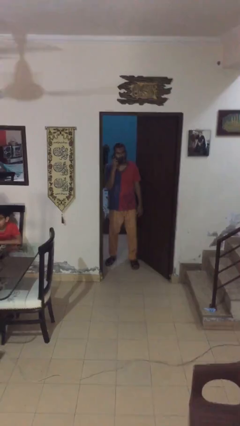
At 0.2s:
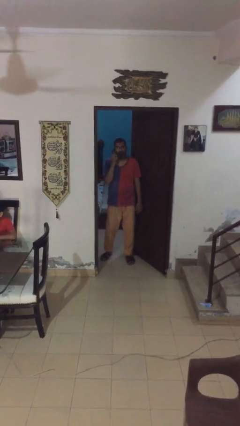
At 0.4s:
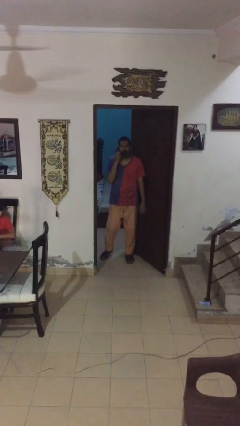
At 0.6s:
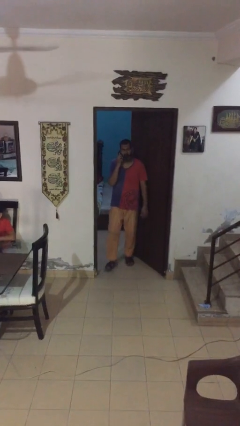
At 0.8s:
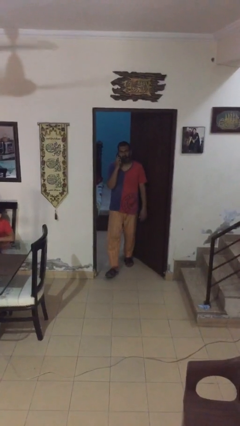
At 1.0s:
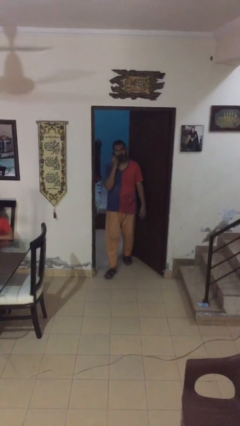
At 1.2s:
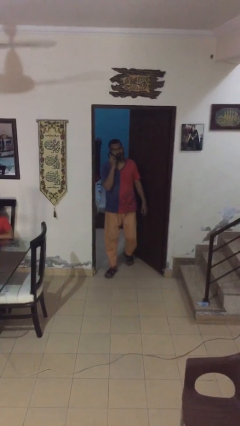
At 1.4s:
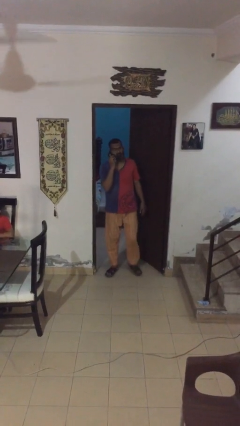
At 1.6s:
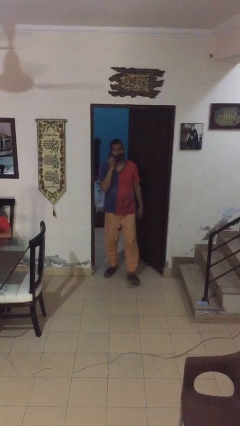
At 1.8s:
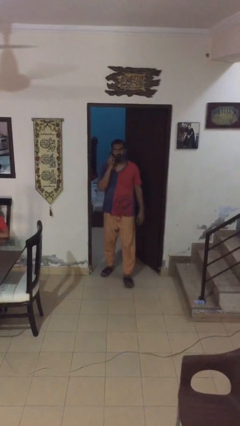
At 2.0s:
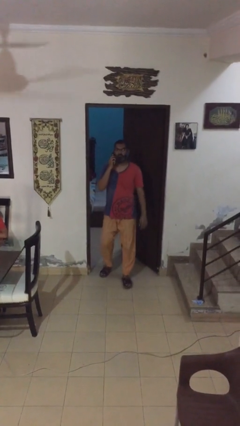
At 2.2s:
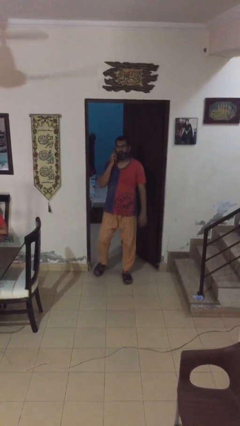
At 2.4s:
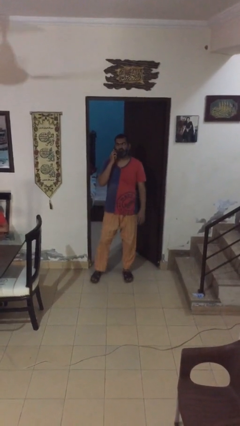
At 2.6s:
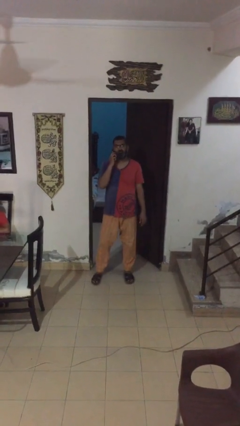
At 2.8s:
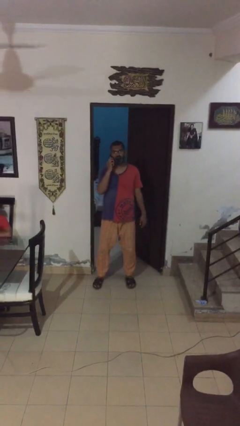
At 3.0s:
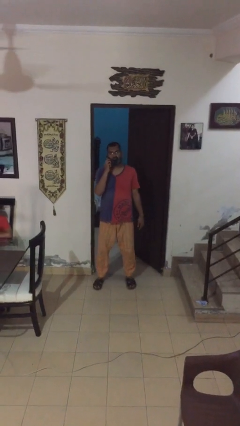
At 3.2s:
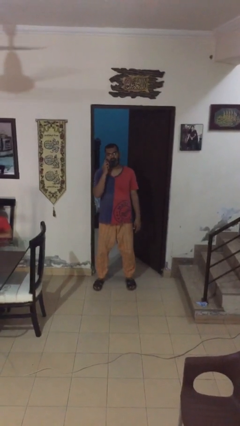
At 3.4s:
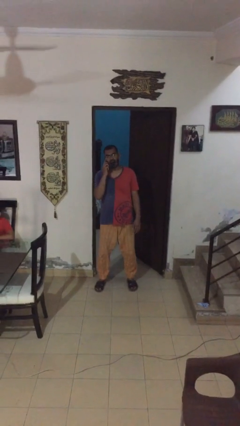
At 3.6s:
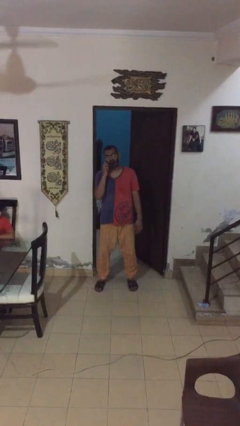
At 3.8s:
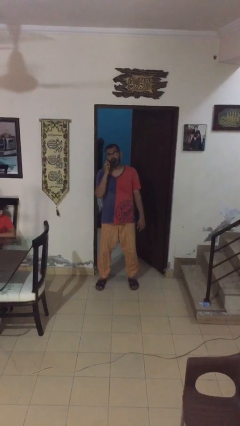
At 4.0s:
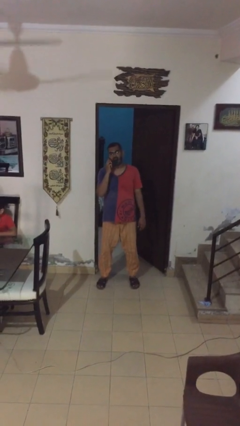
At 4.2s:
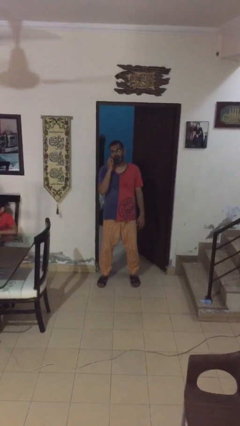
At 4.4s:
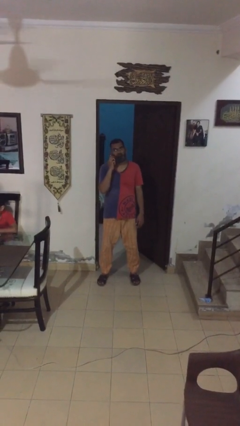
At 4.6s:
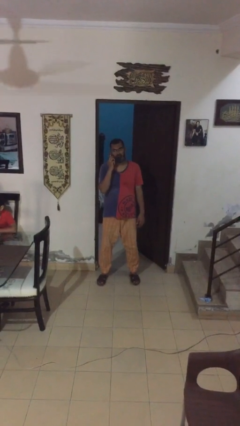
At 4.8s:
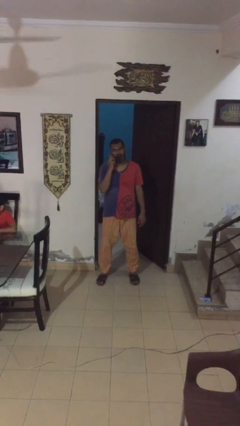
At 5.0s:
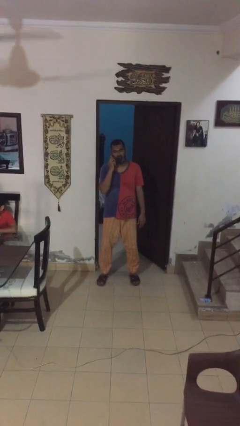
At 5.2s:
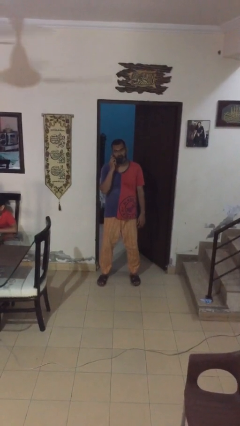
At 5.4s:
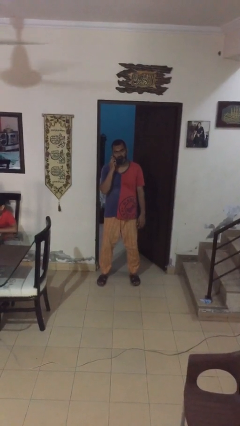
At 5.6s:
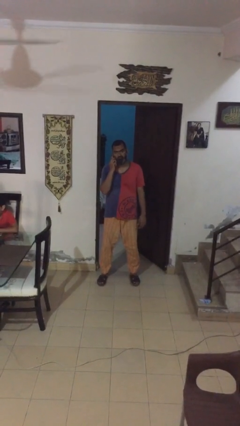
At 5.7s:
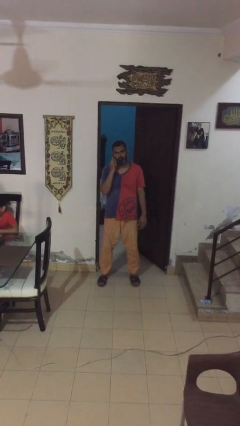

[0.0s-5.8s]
person enters scene through structure

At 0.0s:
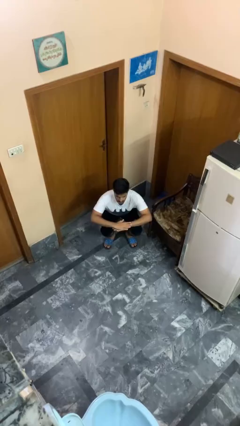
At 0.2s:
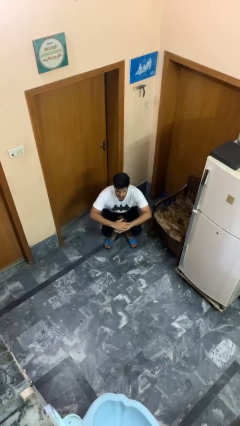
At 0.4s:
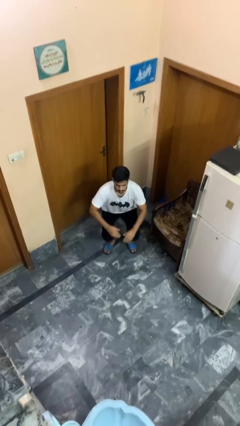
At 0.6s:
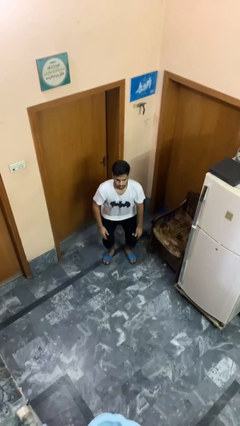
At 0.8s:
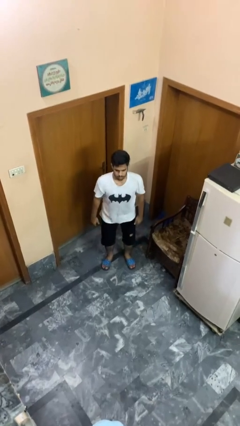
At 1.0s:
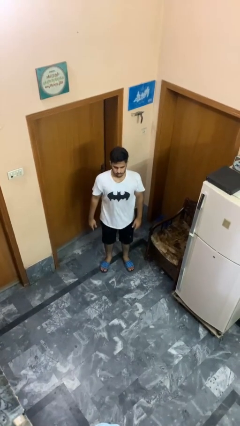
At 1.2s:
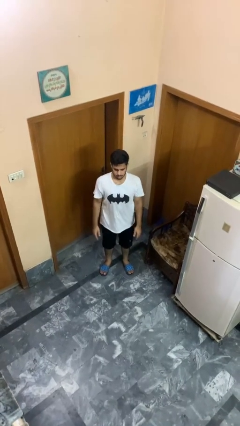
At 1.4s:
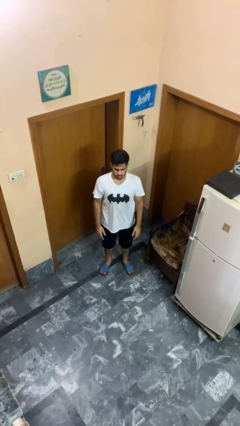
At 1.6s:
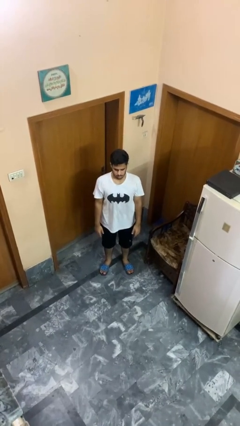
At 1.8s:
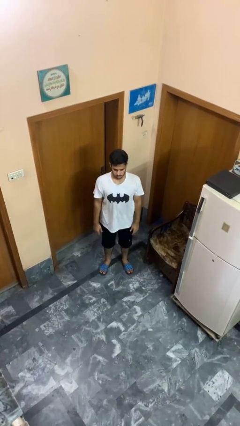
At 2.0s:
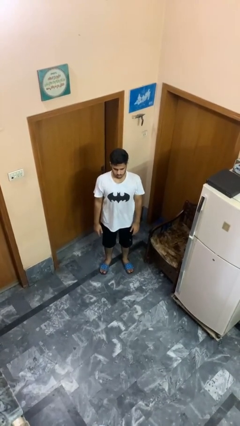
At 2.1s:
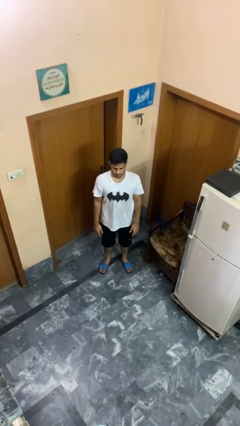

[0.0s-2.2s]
person stands up

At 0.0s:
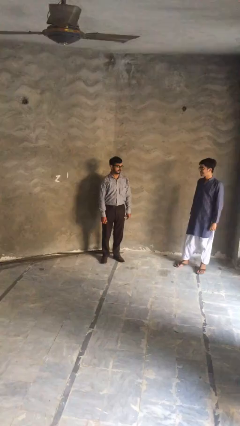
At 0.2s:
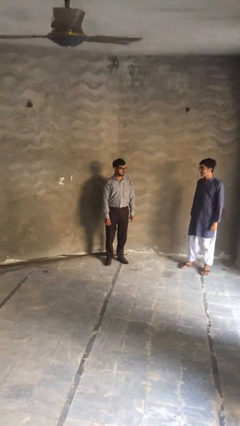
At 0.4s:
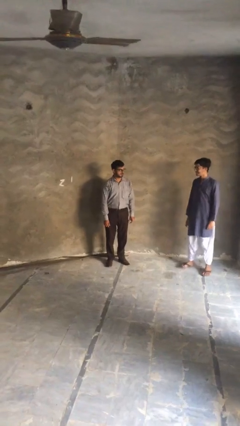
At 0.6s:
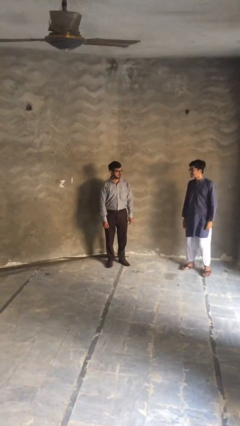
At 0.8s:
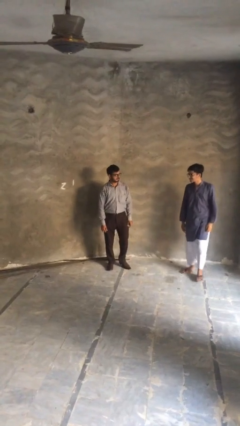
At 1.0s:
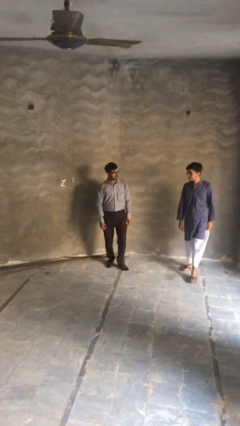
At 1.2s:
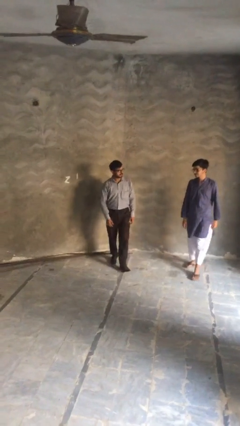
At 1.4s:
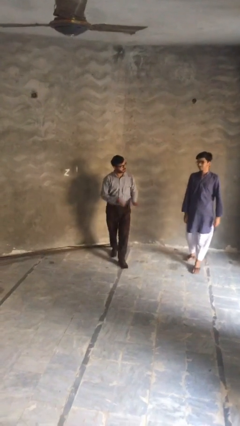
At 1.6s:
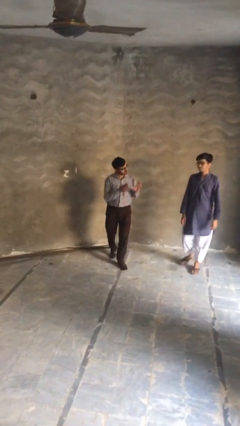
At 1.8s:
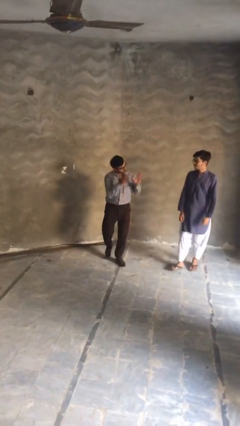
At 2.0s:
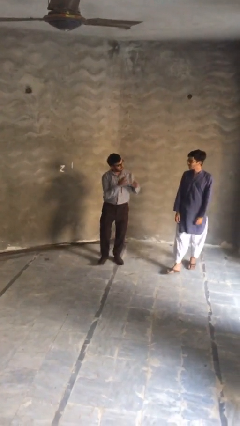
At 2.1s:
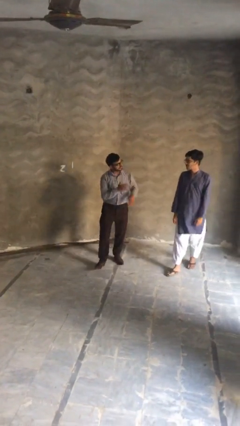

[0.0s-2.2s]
person talks to person

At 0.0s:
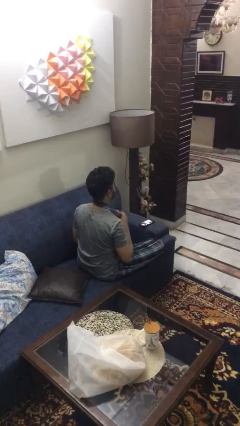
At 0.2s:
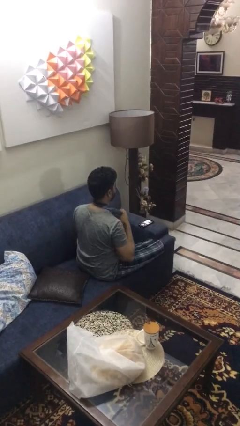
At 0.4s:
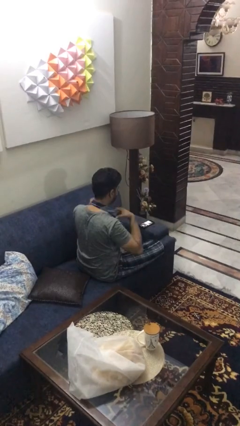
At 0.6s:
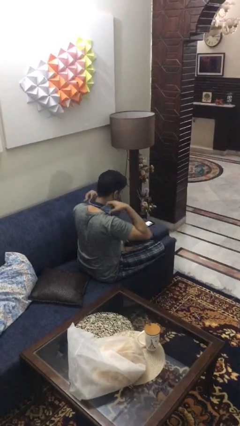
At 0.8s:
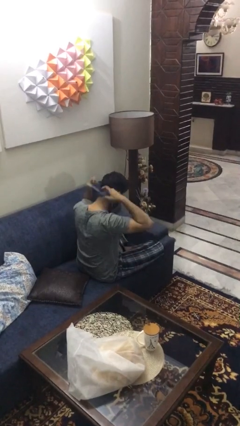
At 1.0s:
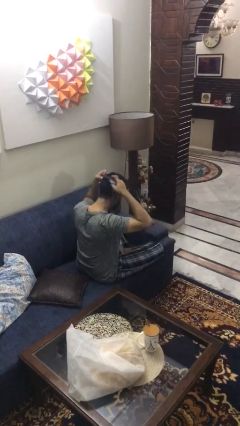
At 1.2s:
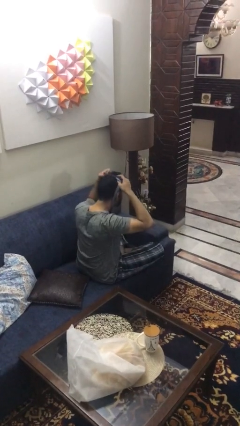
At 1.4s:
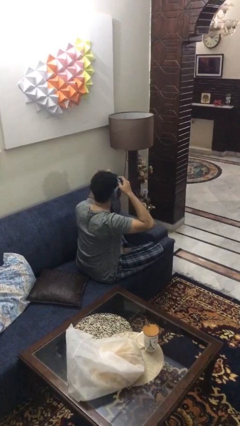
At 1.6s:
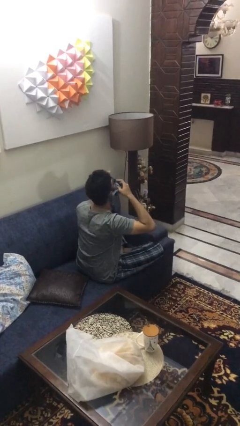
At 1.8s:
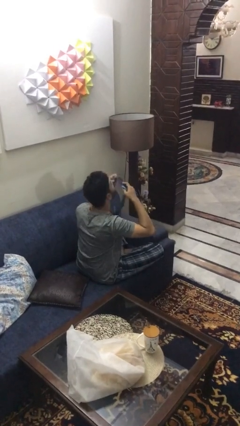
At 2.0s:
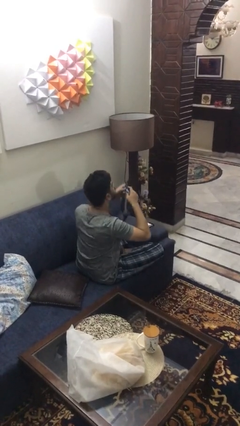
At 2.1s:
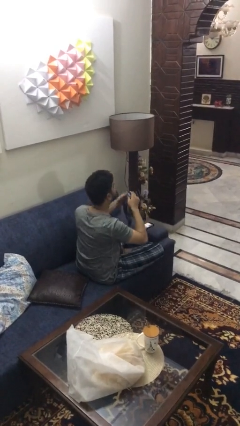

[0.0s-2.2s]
person takes off necktie

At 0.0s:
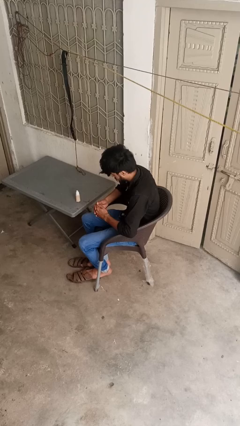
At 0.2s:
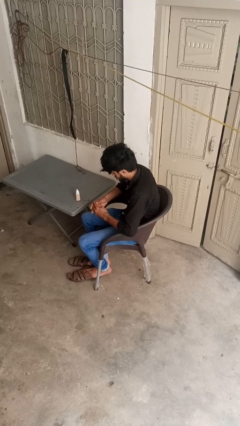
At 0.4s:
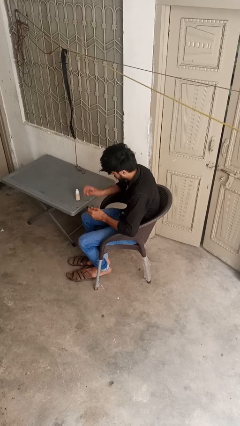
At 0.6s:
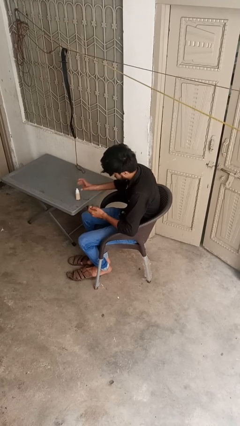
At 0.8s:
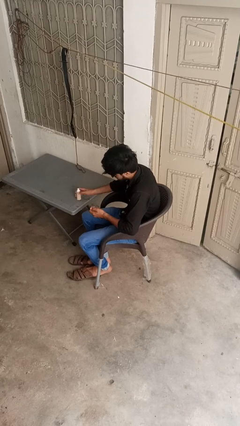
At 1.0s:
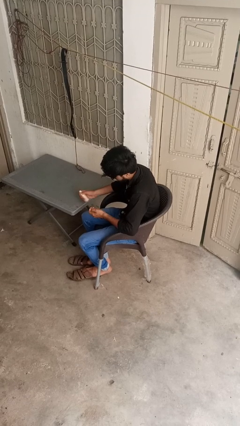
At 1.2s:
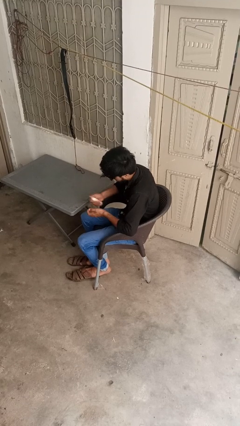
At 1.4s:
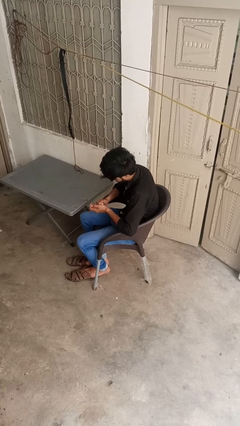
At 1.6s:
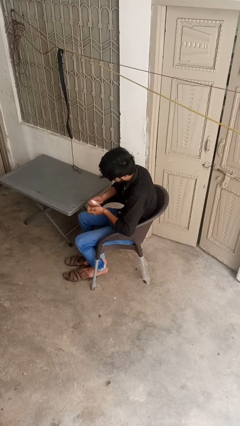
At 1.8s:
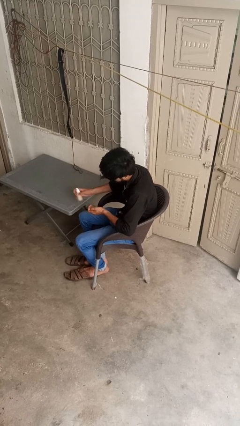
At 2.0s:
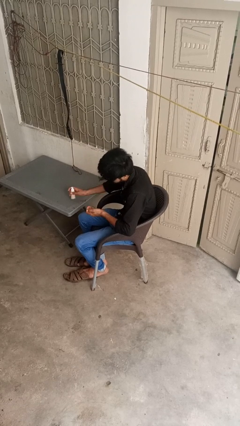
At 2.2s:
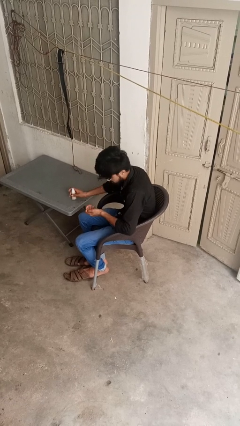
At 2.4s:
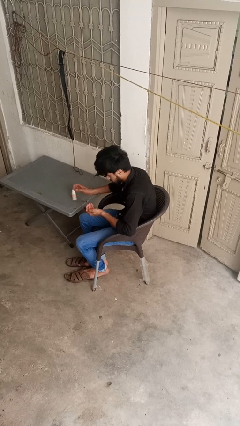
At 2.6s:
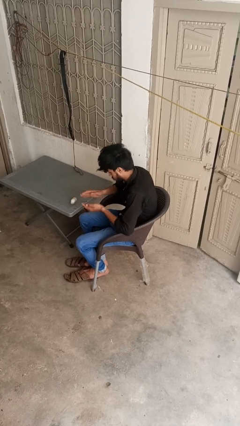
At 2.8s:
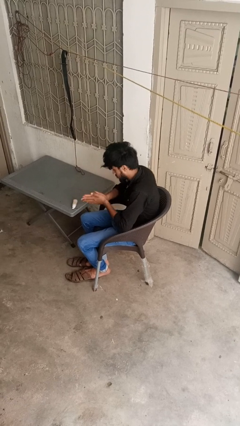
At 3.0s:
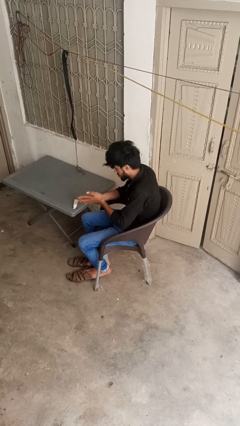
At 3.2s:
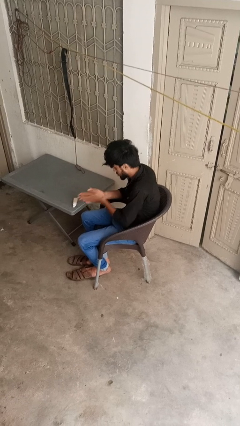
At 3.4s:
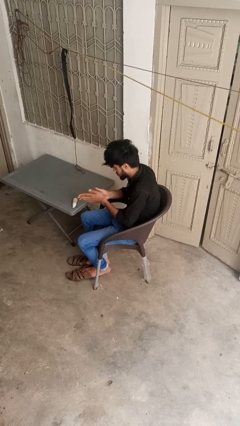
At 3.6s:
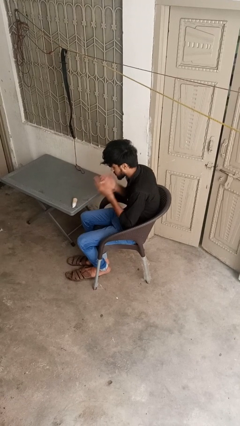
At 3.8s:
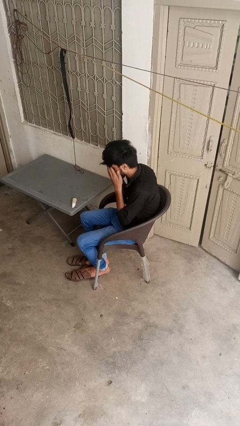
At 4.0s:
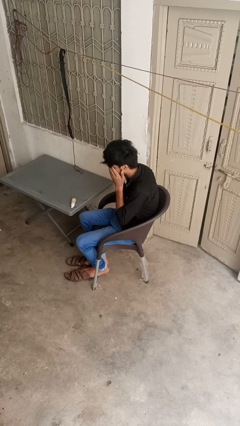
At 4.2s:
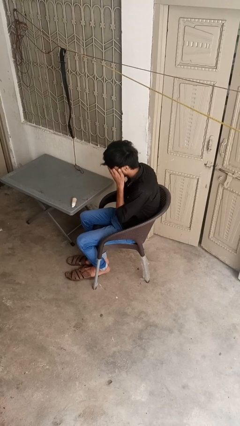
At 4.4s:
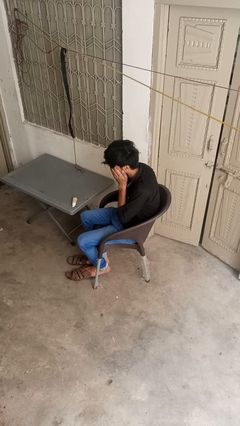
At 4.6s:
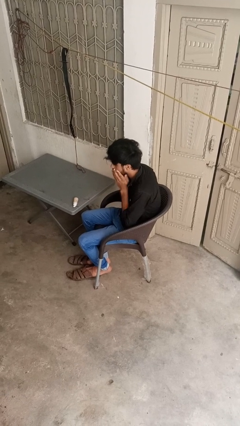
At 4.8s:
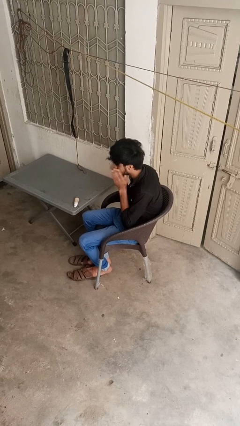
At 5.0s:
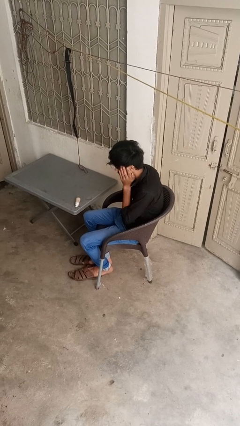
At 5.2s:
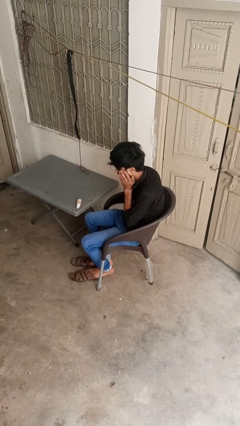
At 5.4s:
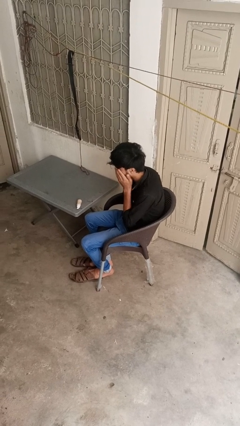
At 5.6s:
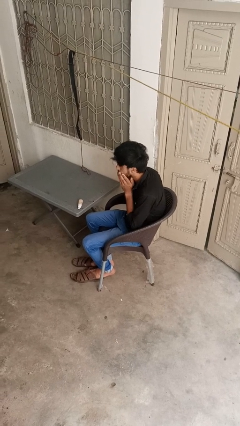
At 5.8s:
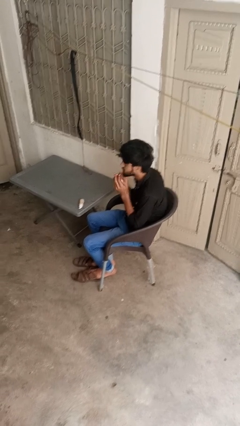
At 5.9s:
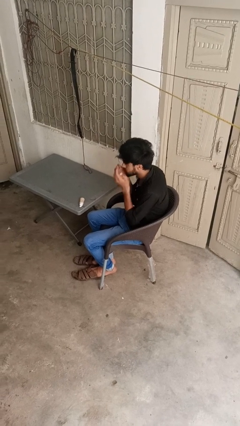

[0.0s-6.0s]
person applies facial moisturizer
